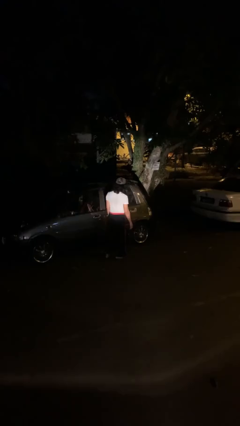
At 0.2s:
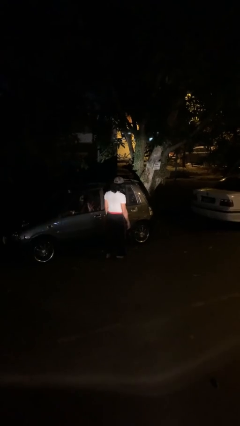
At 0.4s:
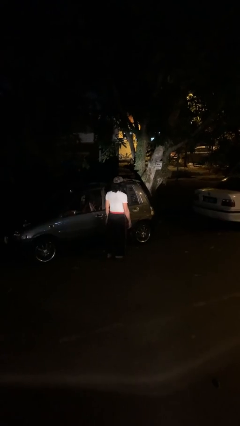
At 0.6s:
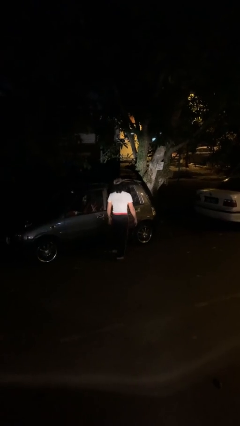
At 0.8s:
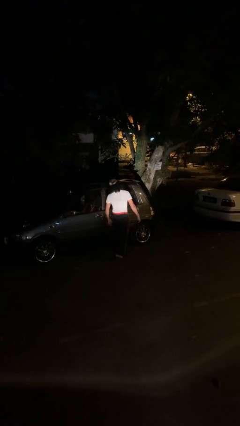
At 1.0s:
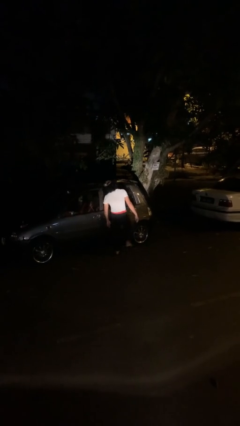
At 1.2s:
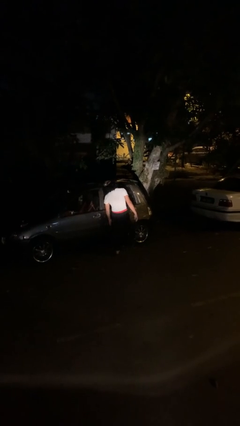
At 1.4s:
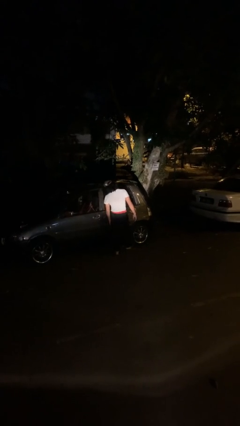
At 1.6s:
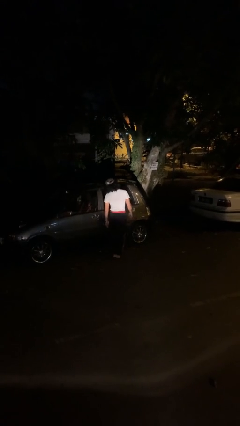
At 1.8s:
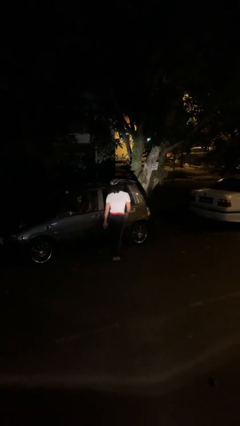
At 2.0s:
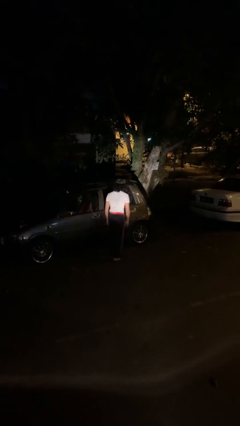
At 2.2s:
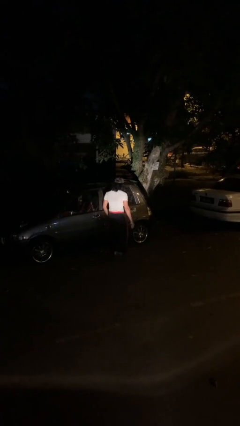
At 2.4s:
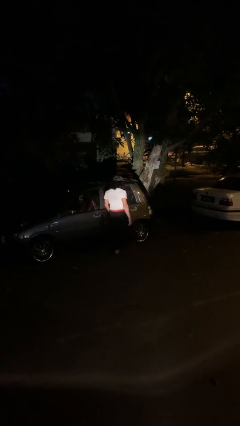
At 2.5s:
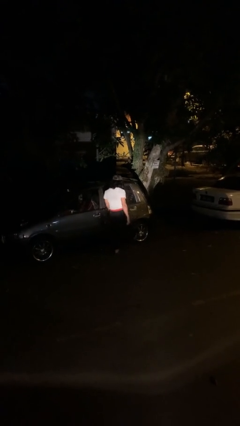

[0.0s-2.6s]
person kicks car tires

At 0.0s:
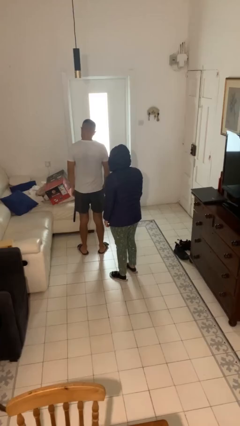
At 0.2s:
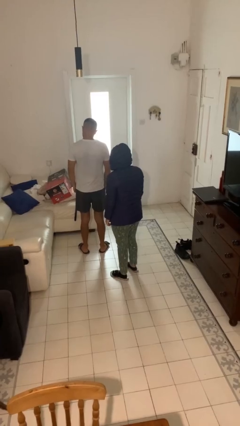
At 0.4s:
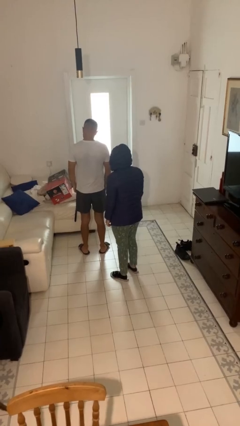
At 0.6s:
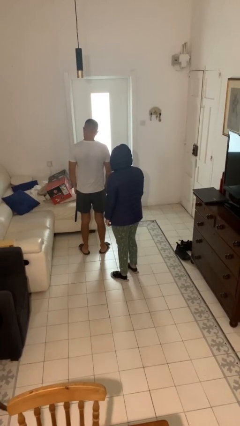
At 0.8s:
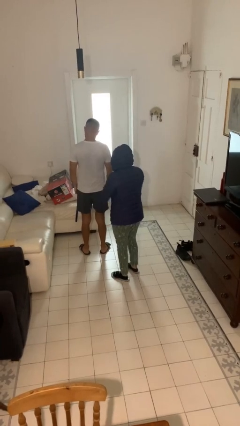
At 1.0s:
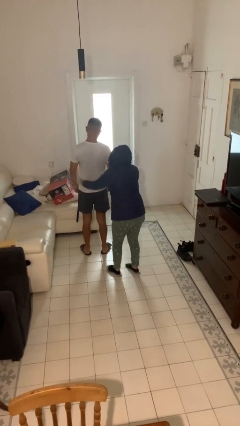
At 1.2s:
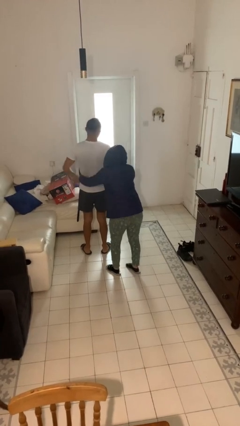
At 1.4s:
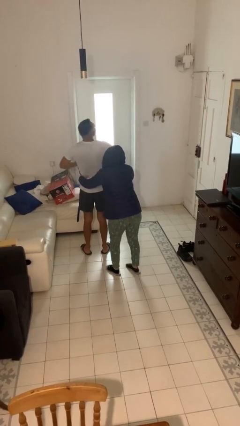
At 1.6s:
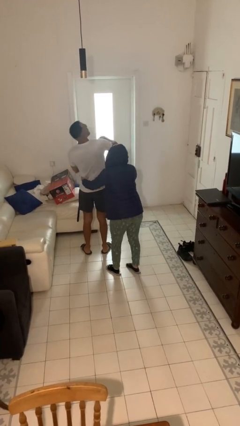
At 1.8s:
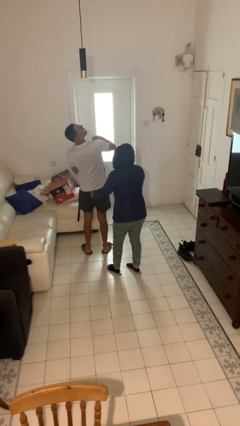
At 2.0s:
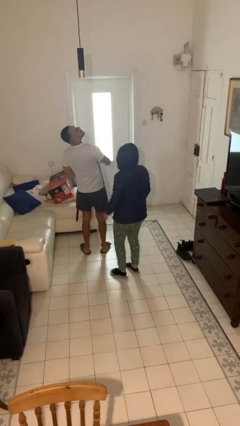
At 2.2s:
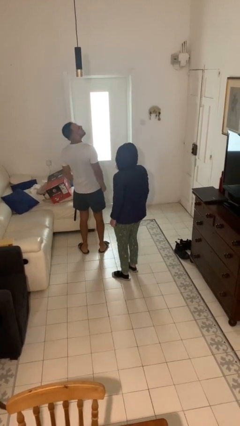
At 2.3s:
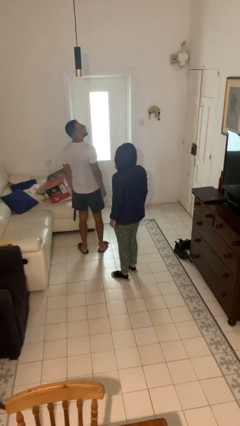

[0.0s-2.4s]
person tickles person

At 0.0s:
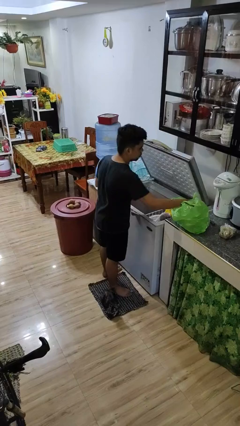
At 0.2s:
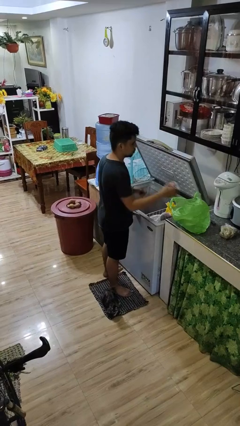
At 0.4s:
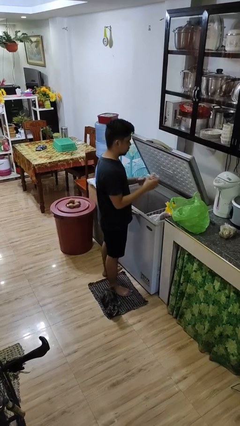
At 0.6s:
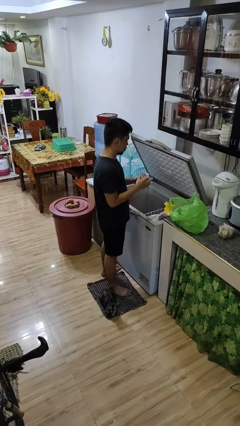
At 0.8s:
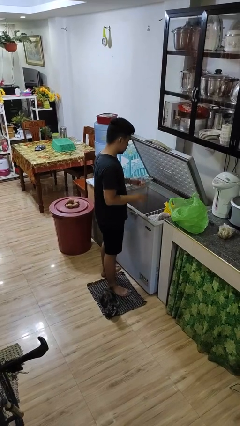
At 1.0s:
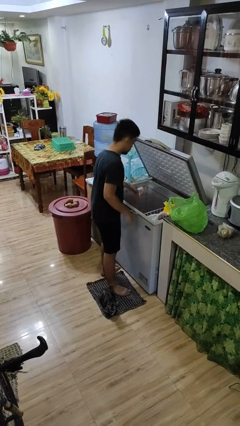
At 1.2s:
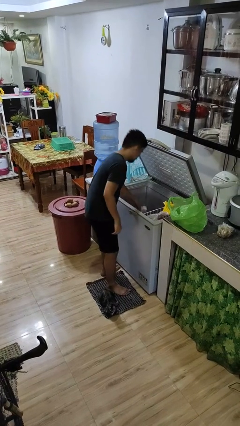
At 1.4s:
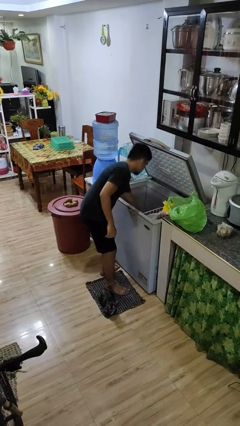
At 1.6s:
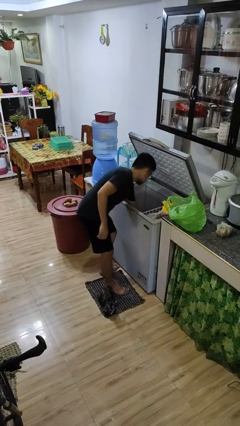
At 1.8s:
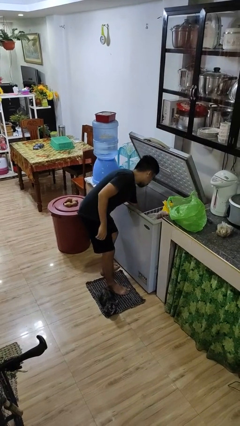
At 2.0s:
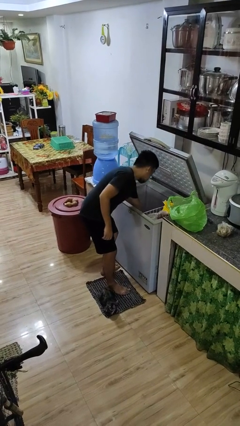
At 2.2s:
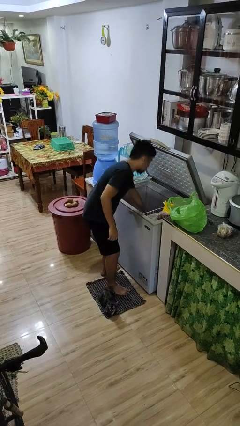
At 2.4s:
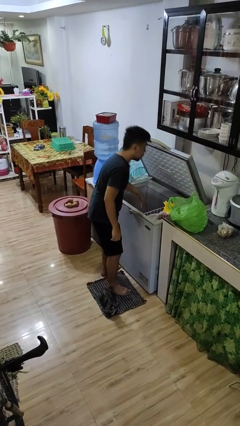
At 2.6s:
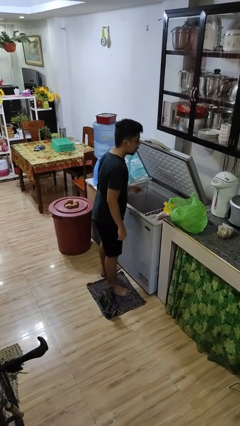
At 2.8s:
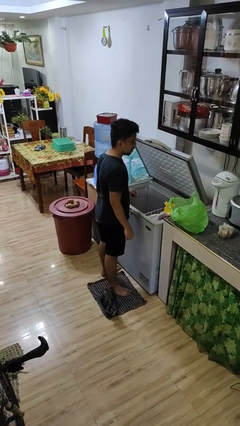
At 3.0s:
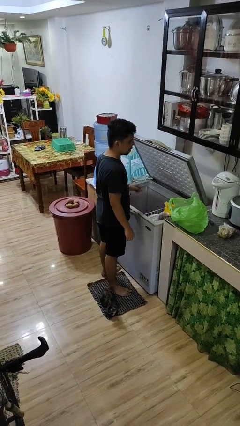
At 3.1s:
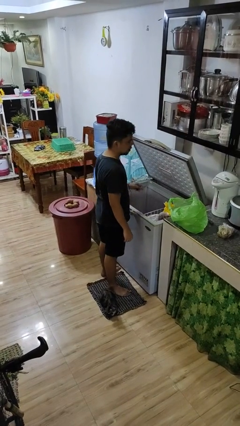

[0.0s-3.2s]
person loads groceries into refrigerator

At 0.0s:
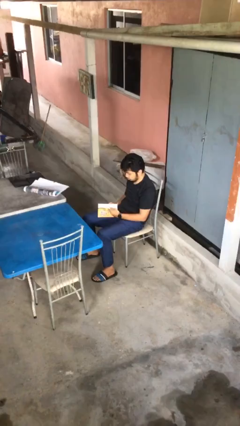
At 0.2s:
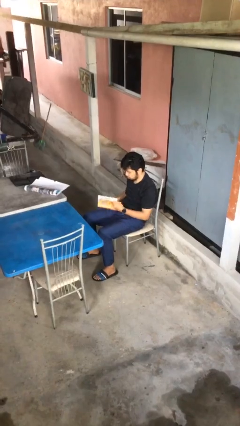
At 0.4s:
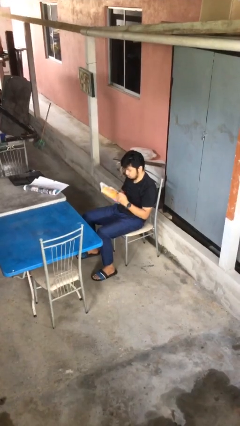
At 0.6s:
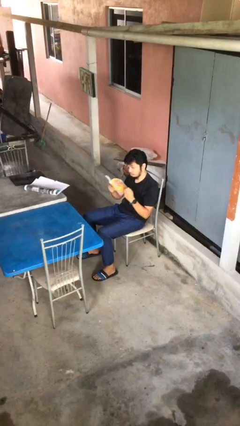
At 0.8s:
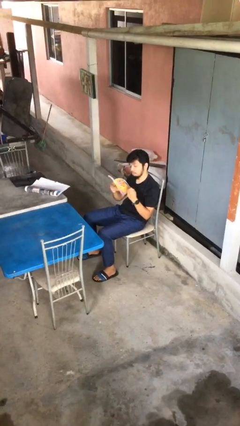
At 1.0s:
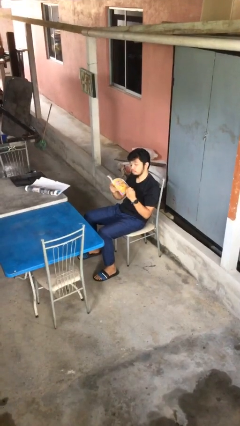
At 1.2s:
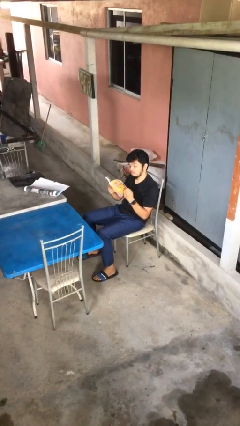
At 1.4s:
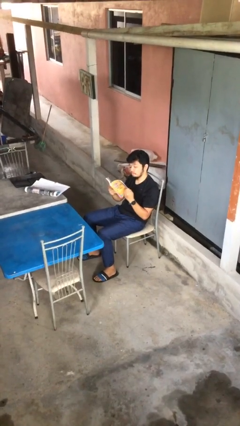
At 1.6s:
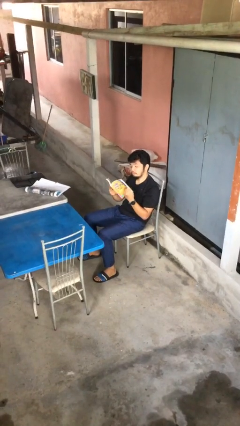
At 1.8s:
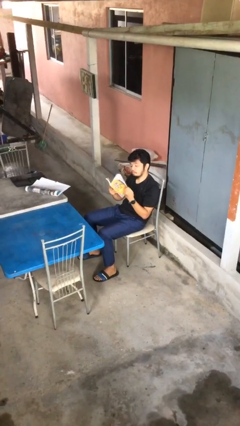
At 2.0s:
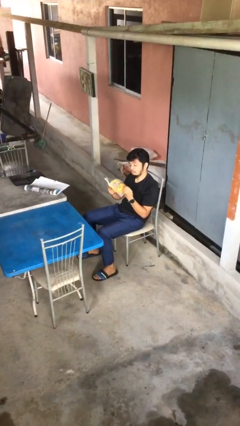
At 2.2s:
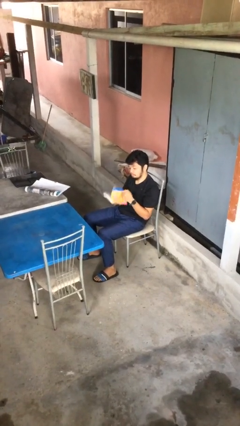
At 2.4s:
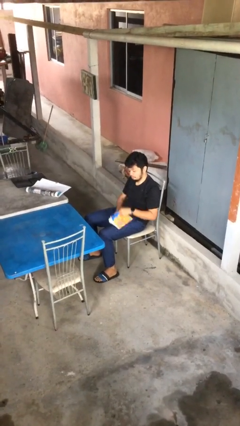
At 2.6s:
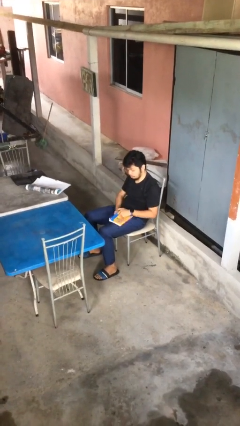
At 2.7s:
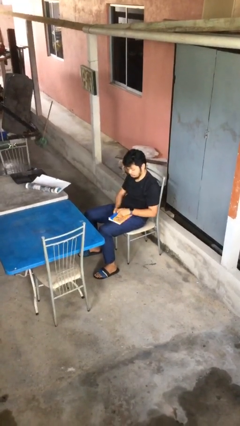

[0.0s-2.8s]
person reads book

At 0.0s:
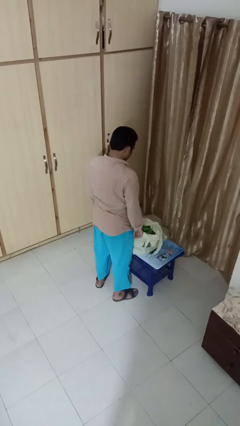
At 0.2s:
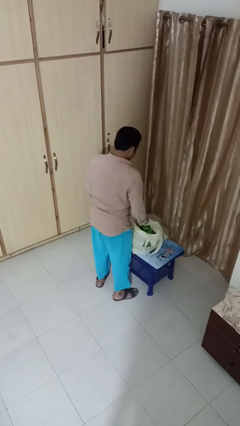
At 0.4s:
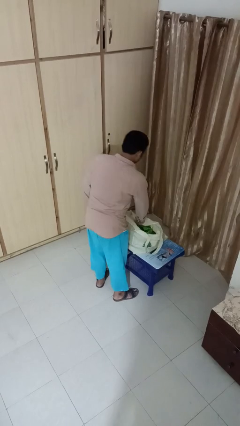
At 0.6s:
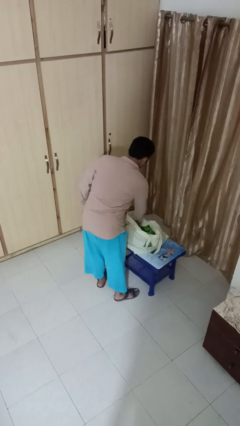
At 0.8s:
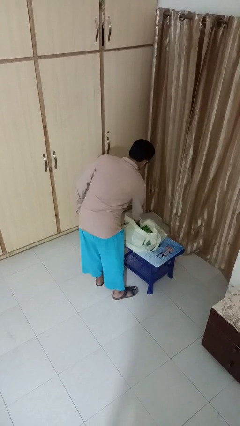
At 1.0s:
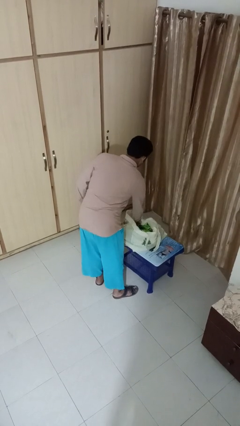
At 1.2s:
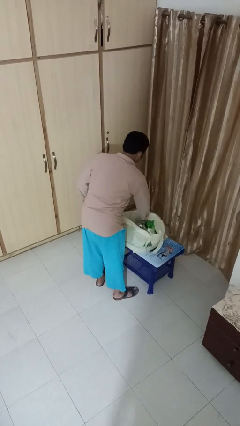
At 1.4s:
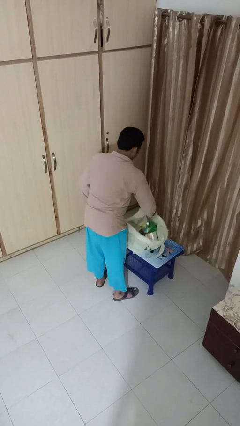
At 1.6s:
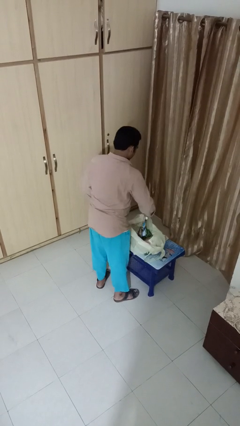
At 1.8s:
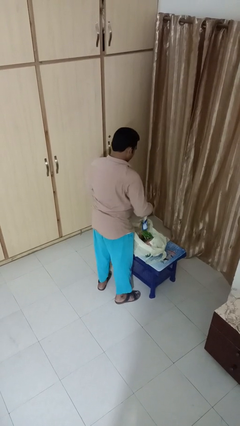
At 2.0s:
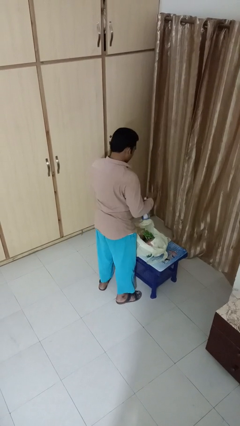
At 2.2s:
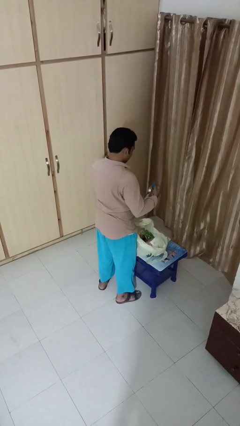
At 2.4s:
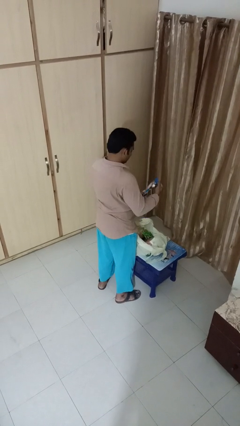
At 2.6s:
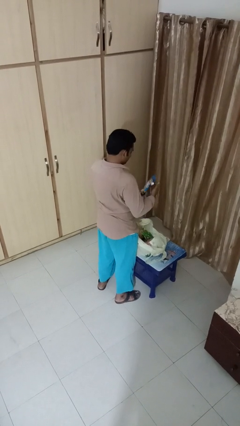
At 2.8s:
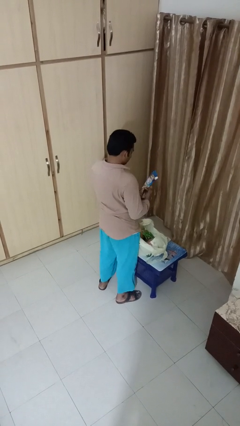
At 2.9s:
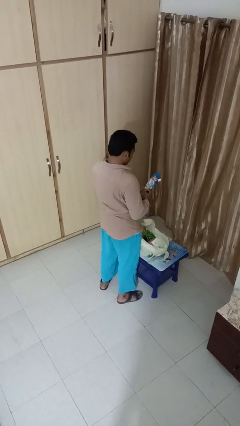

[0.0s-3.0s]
person takes object from bag

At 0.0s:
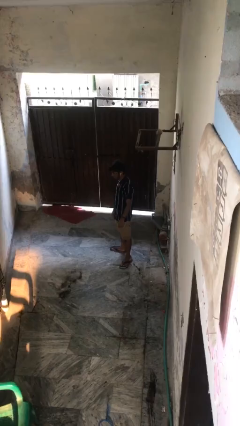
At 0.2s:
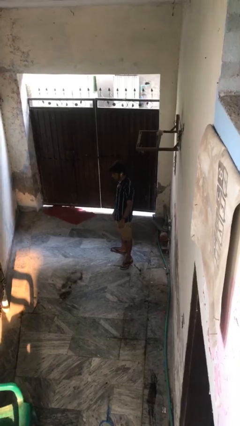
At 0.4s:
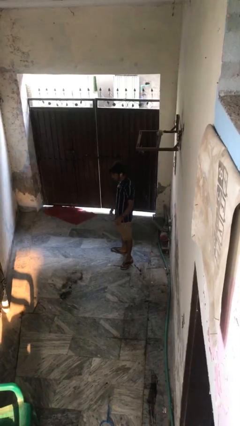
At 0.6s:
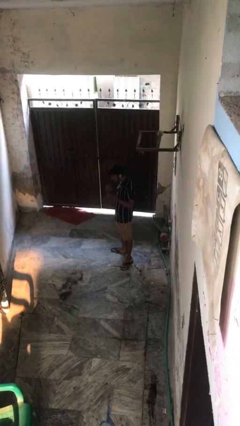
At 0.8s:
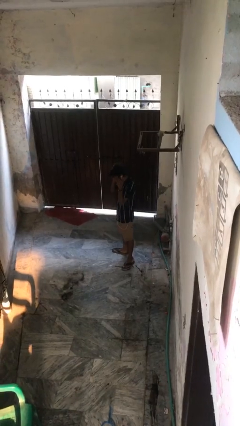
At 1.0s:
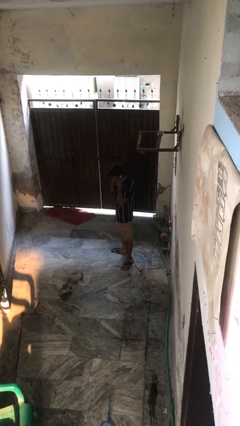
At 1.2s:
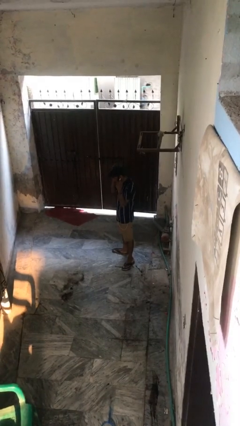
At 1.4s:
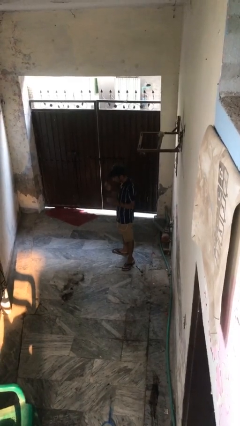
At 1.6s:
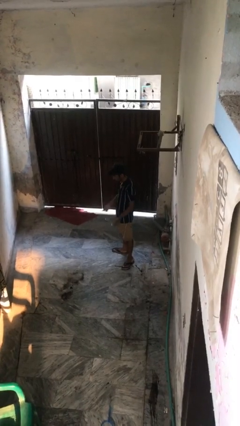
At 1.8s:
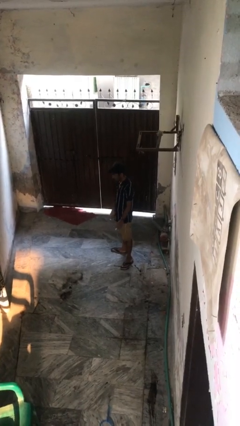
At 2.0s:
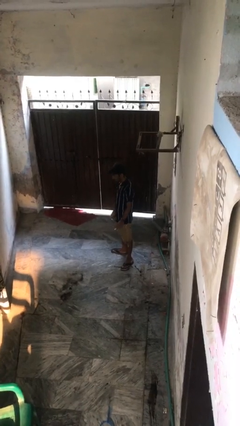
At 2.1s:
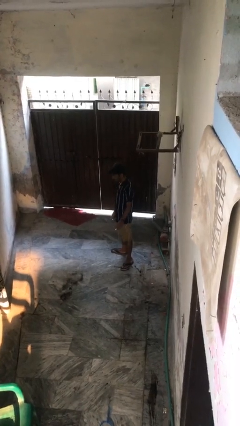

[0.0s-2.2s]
person takes off headphones

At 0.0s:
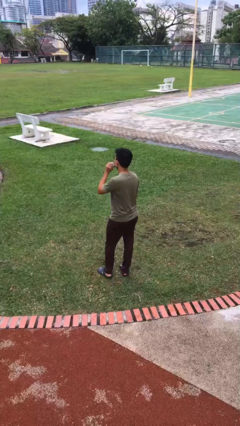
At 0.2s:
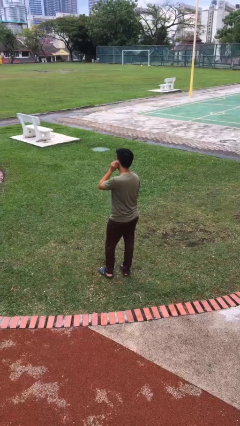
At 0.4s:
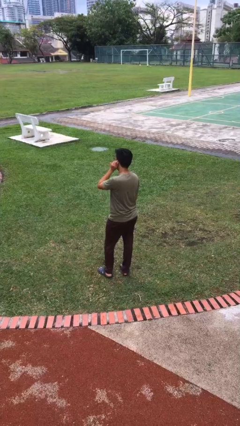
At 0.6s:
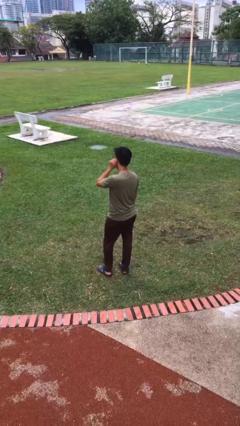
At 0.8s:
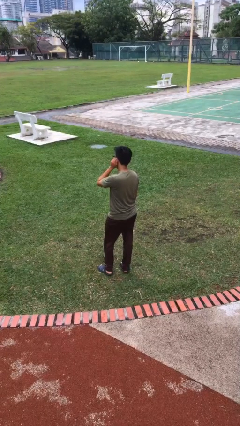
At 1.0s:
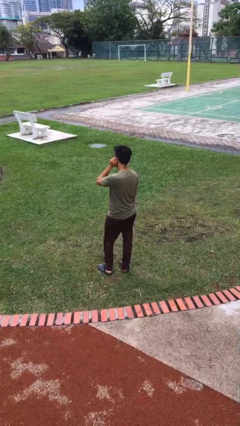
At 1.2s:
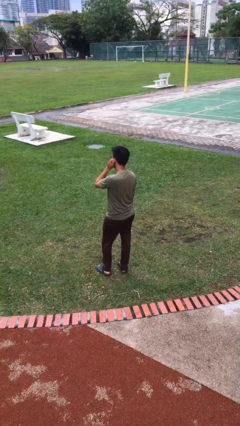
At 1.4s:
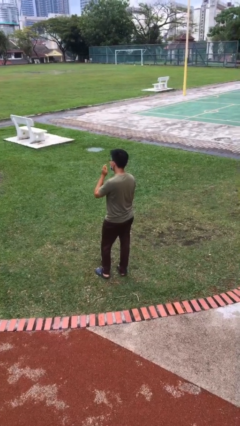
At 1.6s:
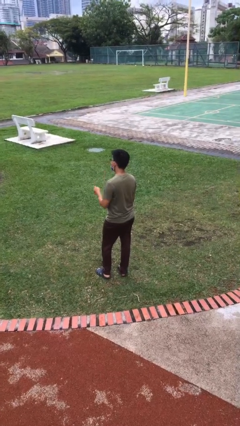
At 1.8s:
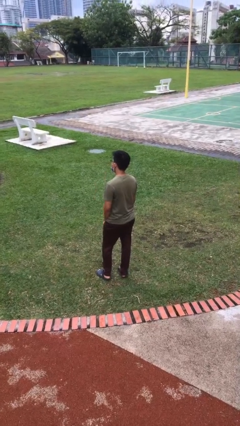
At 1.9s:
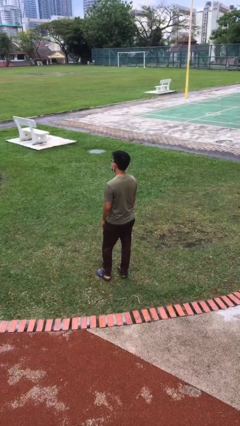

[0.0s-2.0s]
person touches earlobe
